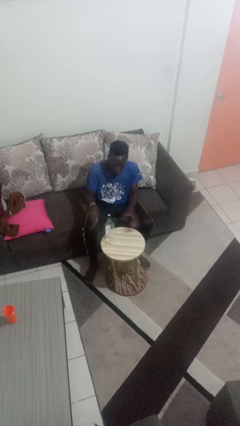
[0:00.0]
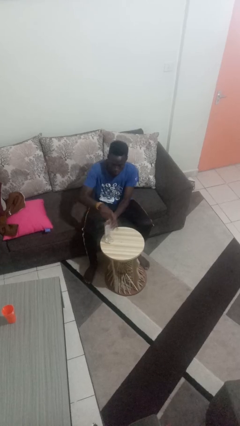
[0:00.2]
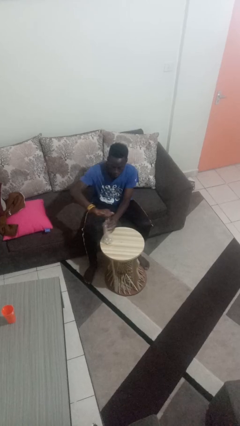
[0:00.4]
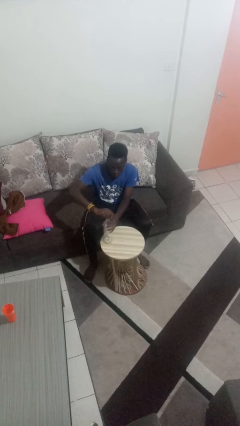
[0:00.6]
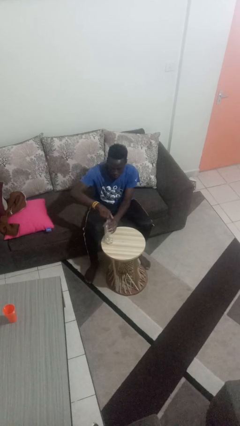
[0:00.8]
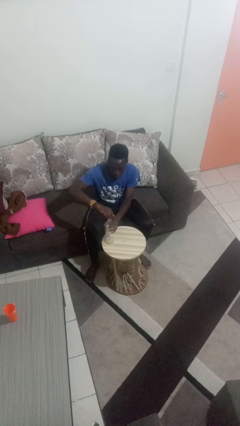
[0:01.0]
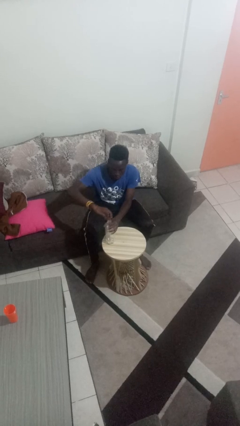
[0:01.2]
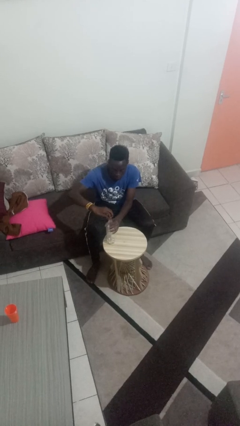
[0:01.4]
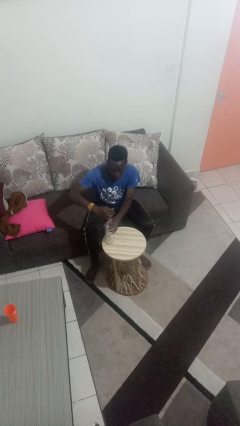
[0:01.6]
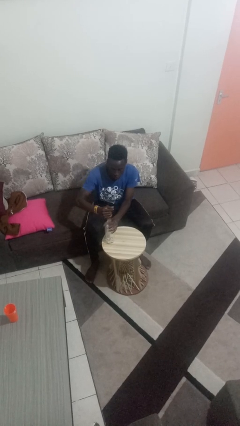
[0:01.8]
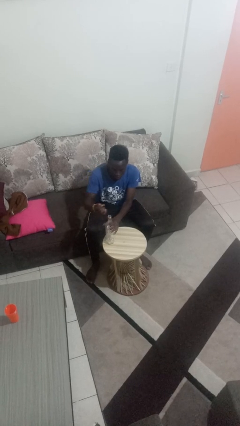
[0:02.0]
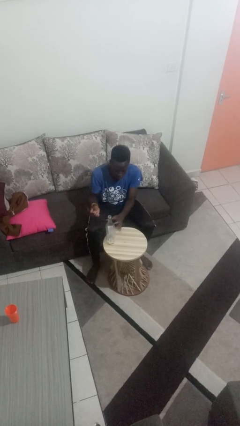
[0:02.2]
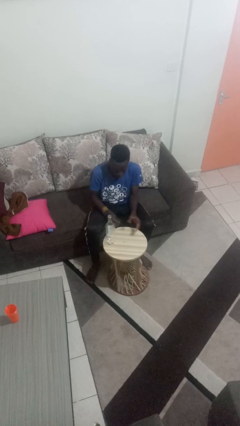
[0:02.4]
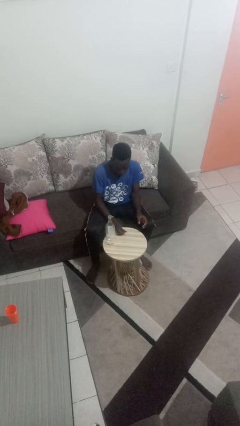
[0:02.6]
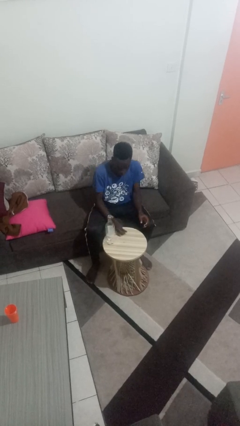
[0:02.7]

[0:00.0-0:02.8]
person unscrews lid from bottle

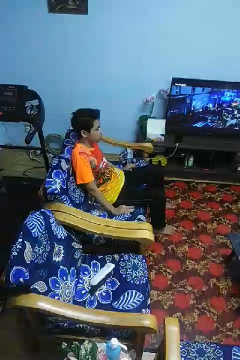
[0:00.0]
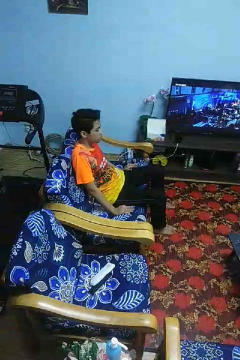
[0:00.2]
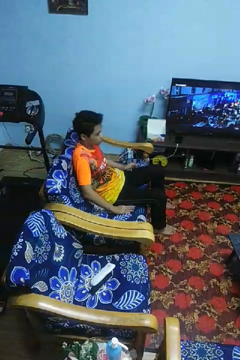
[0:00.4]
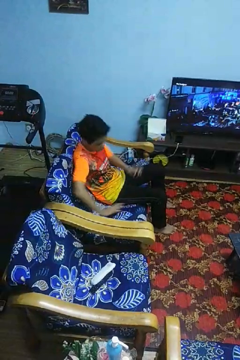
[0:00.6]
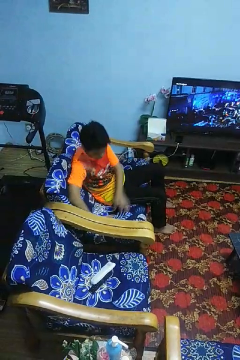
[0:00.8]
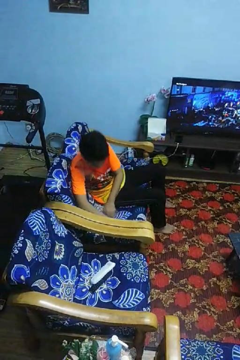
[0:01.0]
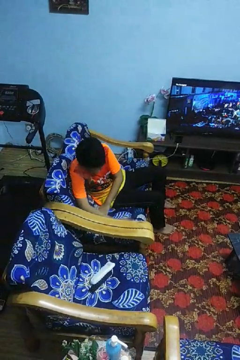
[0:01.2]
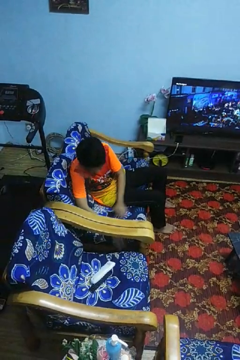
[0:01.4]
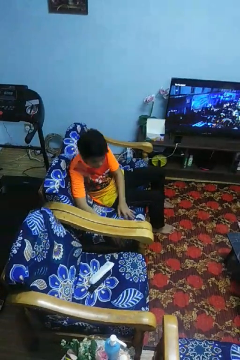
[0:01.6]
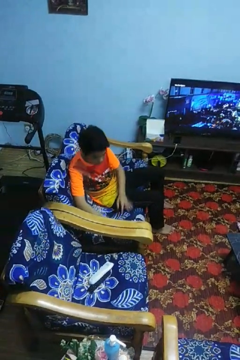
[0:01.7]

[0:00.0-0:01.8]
person searches in couch

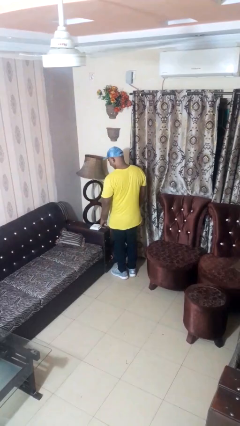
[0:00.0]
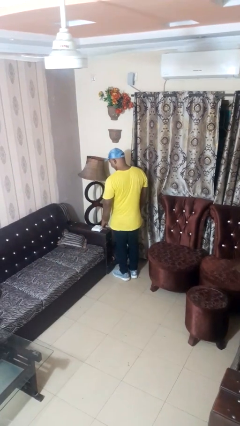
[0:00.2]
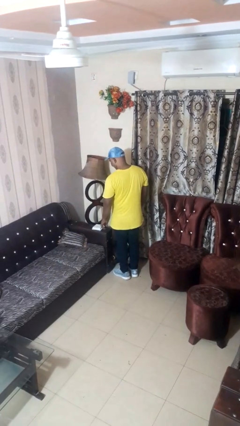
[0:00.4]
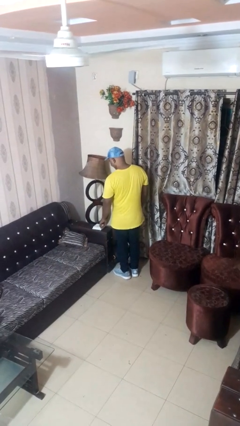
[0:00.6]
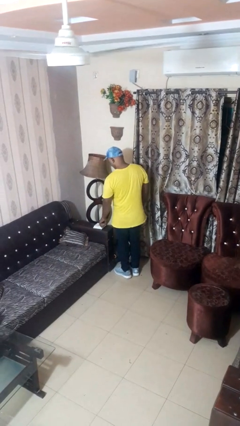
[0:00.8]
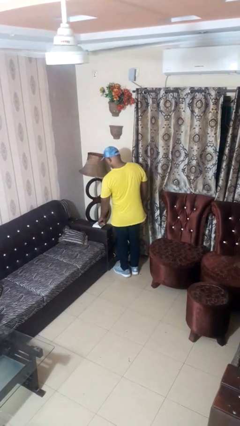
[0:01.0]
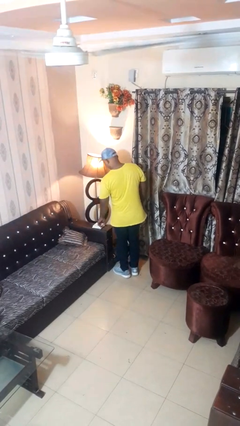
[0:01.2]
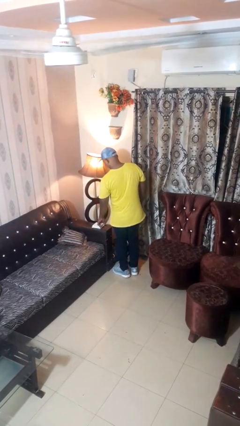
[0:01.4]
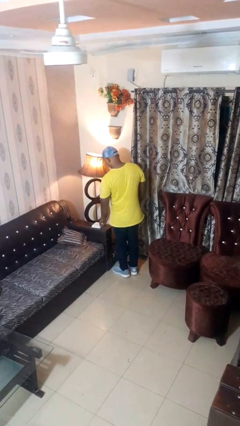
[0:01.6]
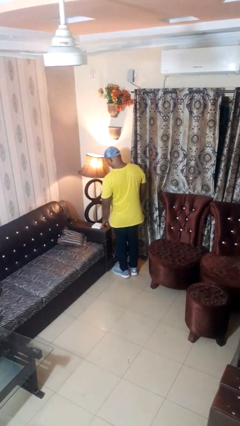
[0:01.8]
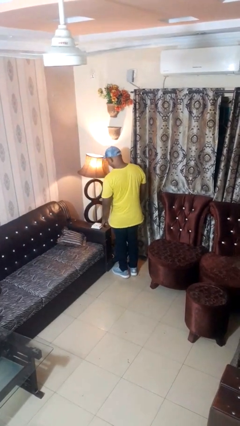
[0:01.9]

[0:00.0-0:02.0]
person turns on lamp

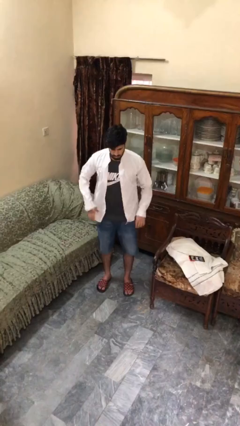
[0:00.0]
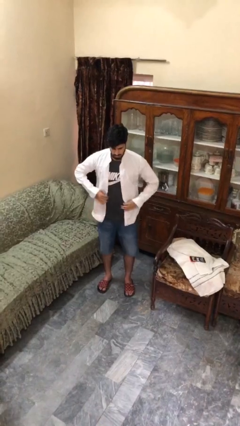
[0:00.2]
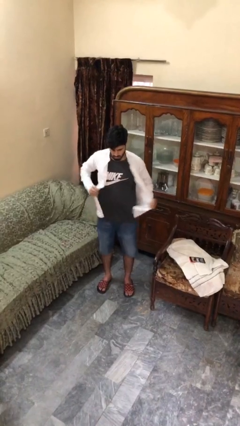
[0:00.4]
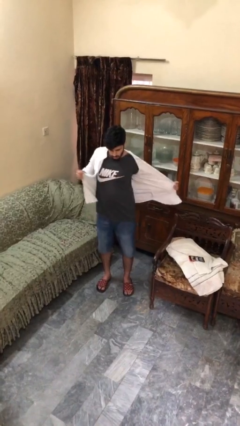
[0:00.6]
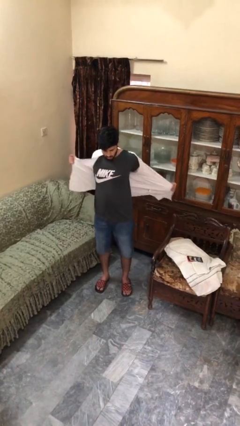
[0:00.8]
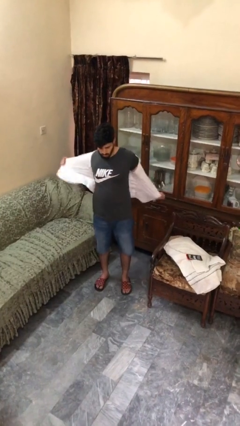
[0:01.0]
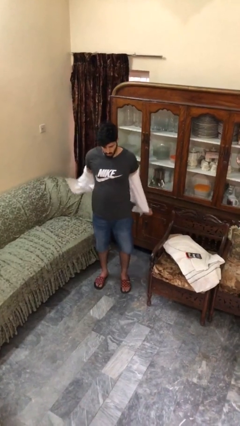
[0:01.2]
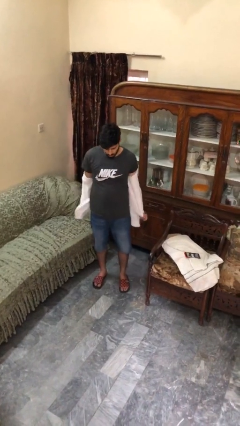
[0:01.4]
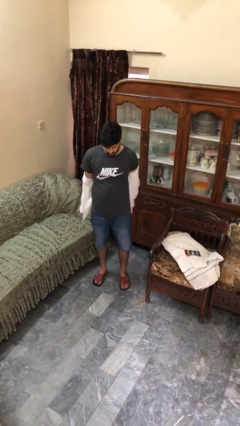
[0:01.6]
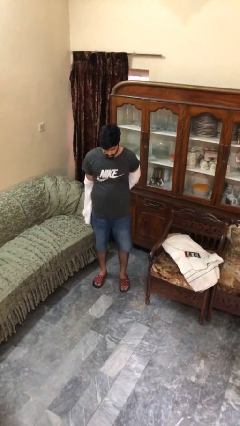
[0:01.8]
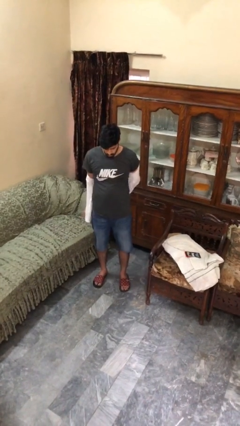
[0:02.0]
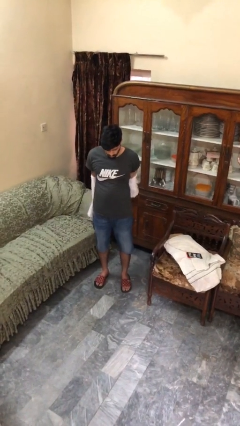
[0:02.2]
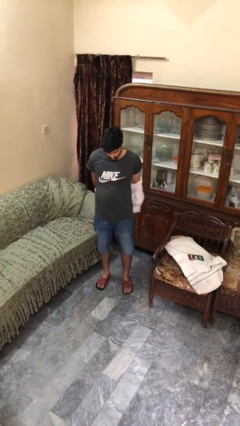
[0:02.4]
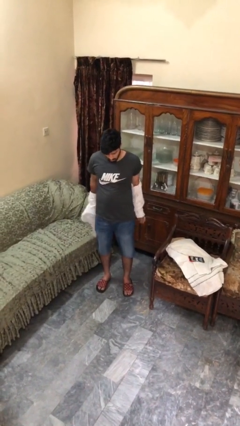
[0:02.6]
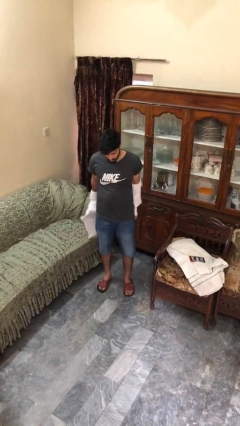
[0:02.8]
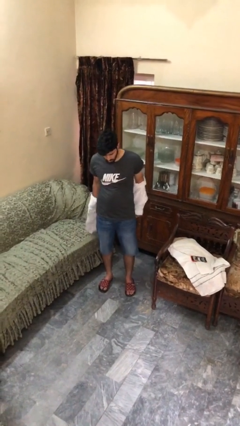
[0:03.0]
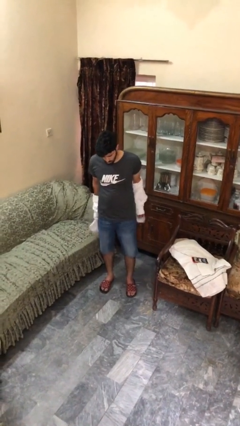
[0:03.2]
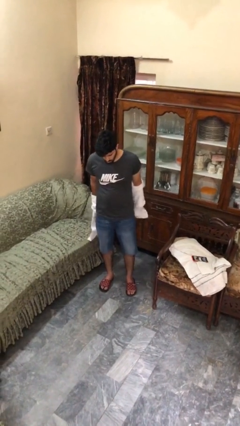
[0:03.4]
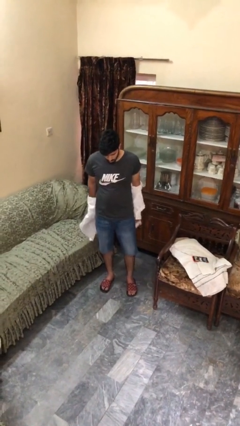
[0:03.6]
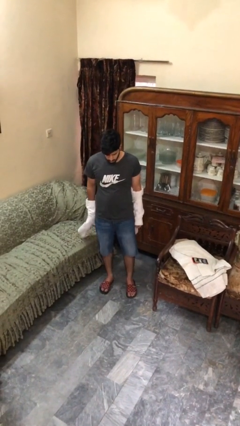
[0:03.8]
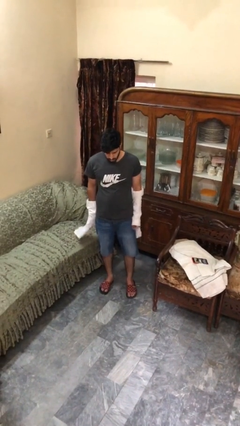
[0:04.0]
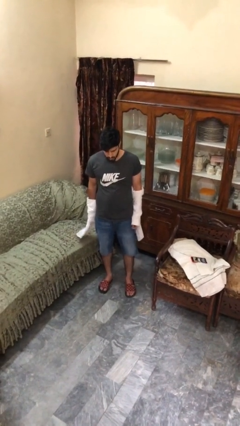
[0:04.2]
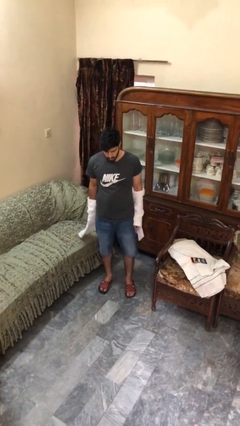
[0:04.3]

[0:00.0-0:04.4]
person takes off shirt

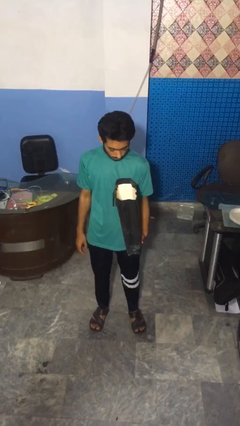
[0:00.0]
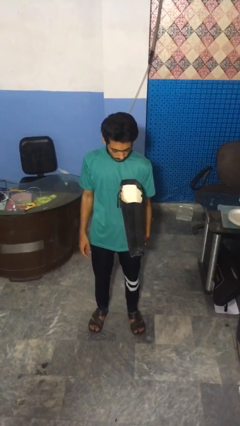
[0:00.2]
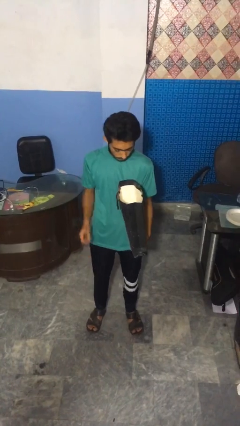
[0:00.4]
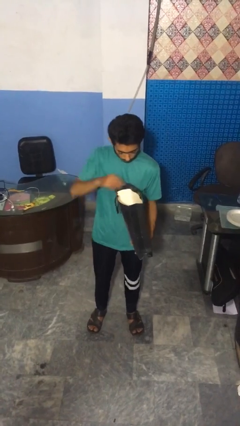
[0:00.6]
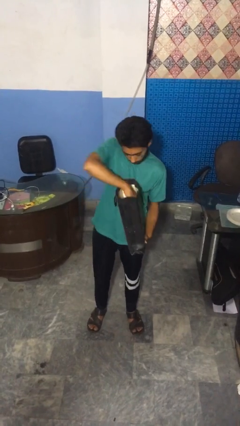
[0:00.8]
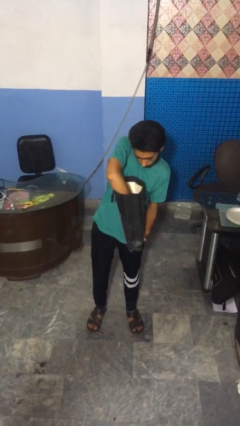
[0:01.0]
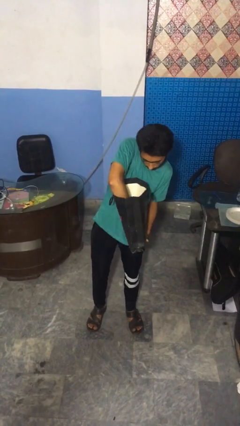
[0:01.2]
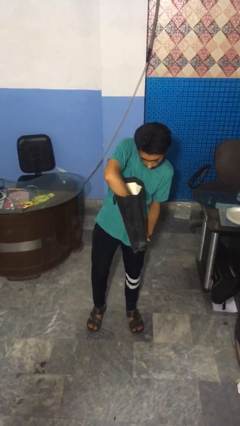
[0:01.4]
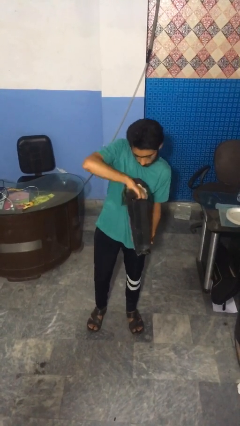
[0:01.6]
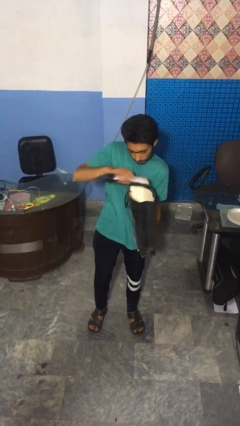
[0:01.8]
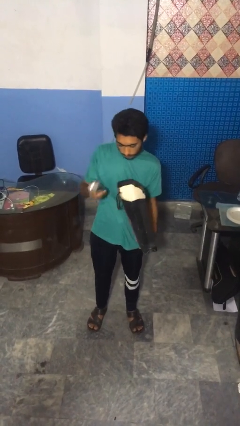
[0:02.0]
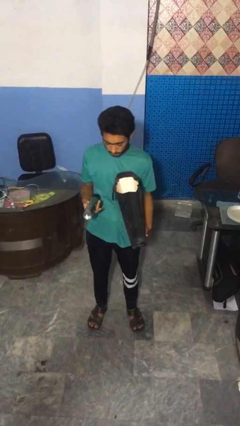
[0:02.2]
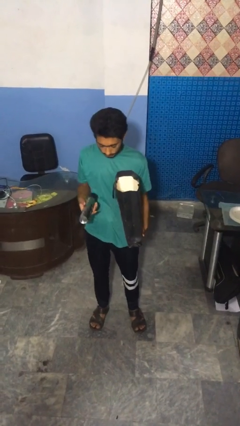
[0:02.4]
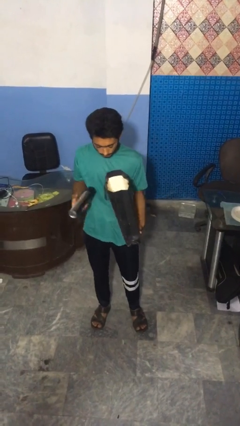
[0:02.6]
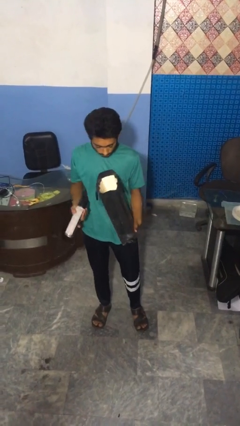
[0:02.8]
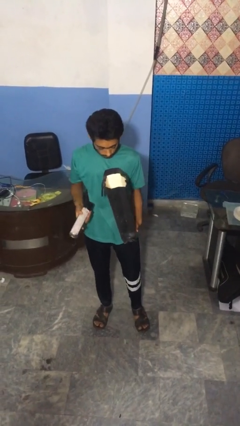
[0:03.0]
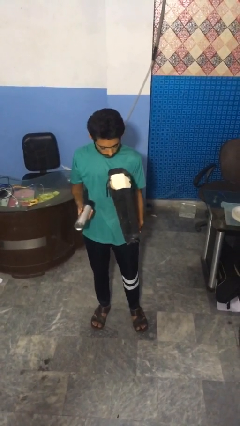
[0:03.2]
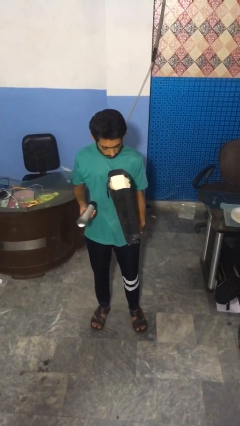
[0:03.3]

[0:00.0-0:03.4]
person takes object from bag

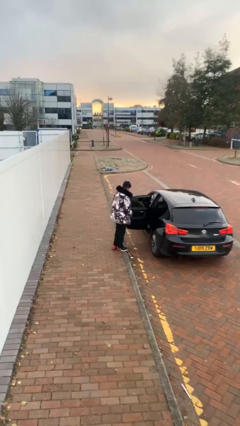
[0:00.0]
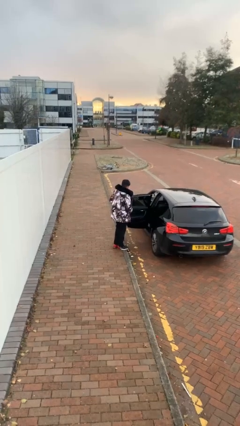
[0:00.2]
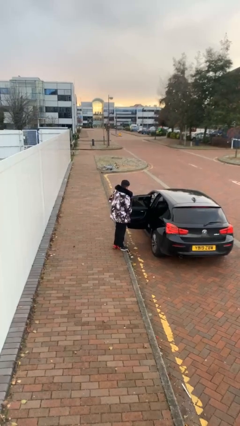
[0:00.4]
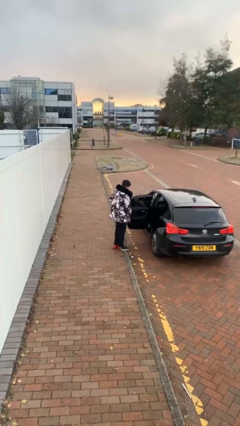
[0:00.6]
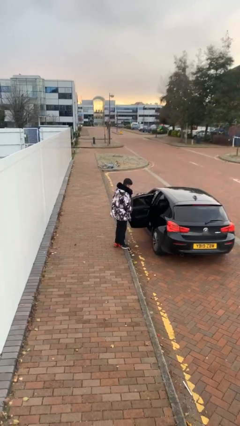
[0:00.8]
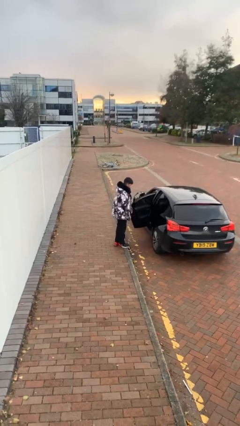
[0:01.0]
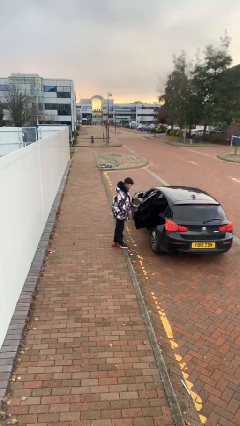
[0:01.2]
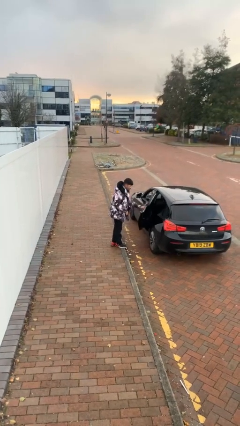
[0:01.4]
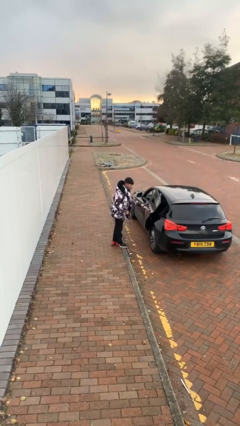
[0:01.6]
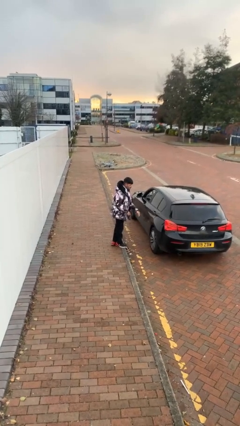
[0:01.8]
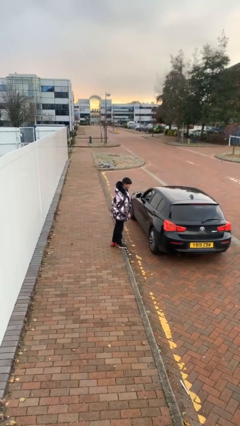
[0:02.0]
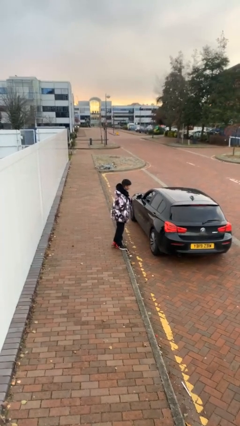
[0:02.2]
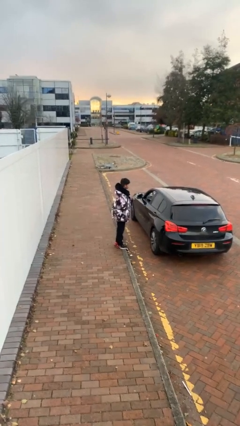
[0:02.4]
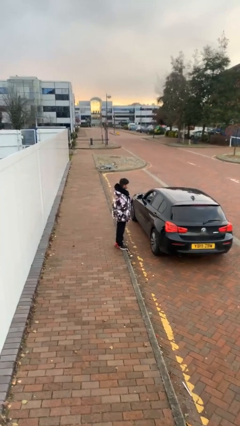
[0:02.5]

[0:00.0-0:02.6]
person closes car door

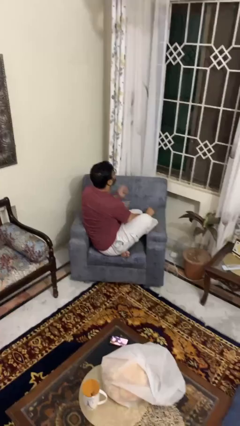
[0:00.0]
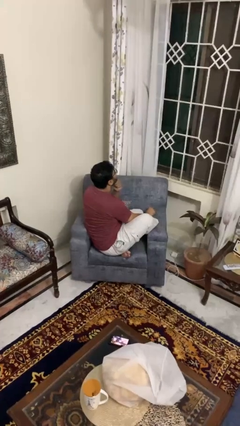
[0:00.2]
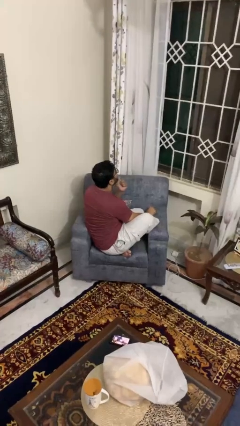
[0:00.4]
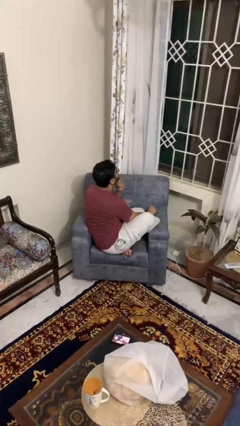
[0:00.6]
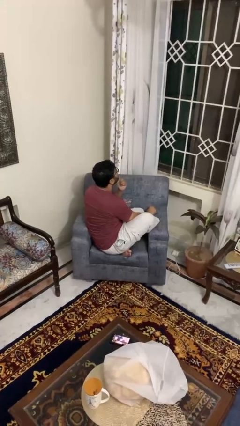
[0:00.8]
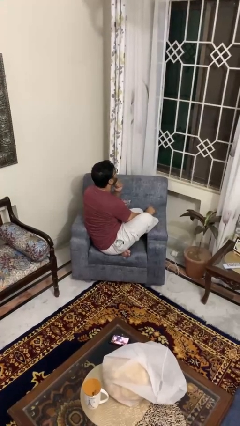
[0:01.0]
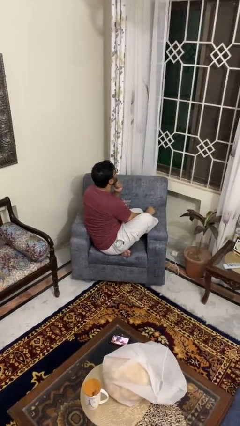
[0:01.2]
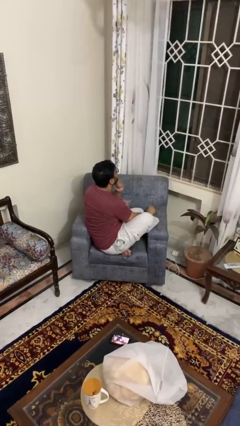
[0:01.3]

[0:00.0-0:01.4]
person strokes chin
